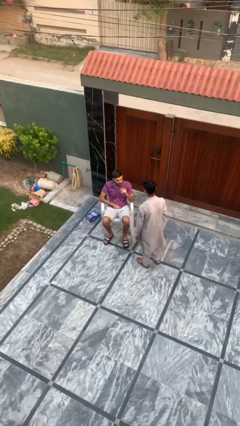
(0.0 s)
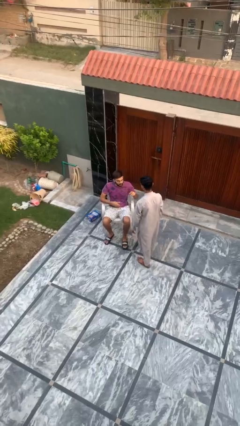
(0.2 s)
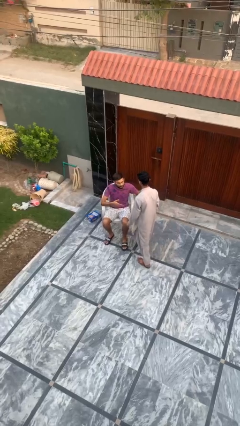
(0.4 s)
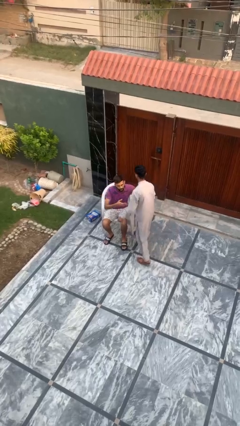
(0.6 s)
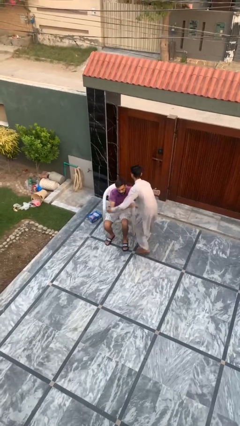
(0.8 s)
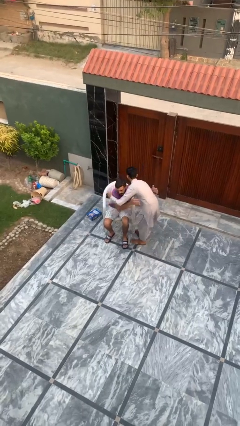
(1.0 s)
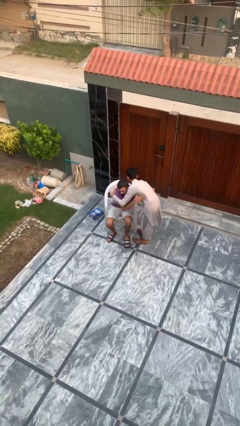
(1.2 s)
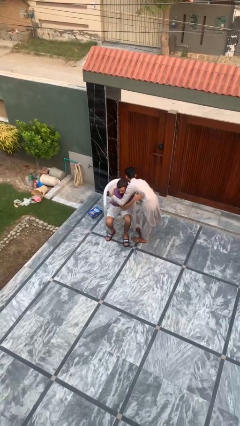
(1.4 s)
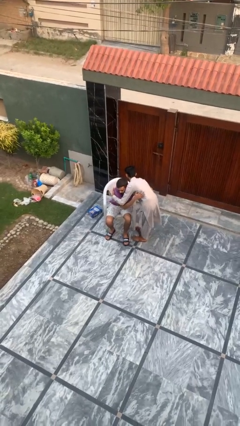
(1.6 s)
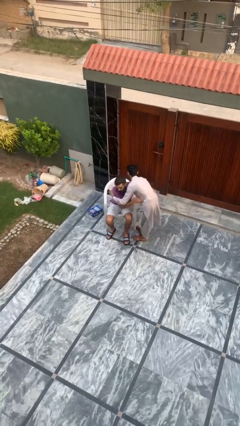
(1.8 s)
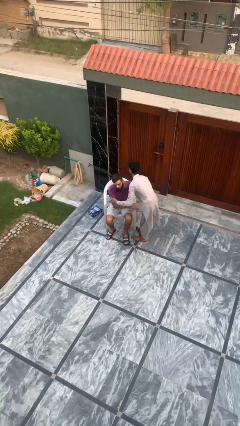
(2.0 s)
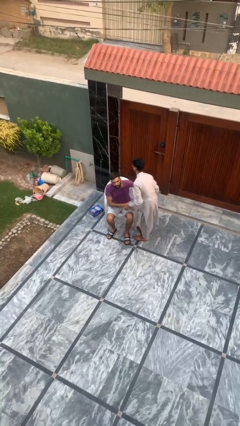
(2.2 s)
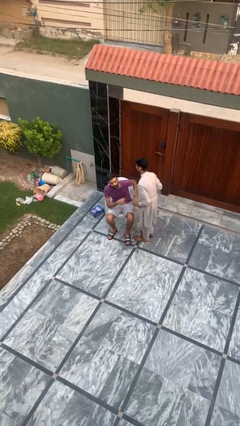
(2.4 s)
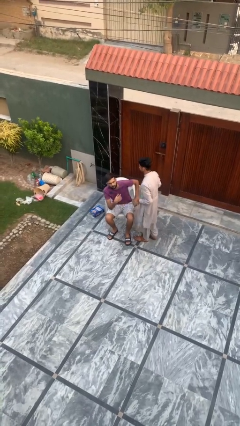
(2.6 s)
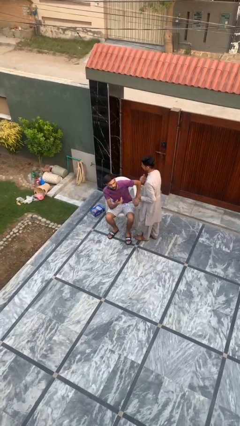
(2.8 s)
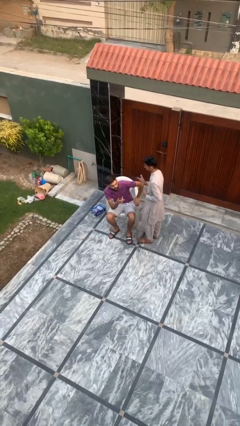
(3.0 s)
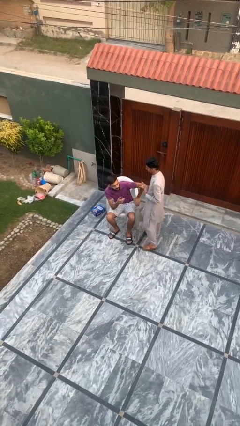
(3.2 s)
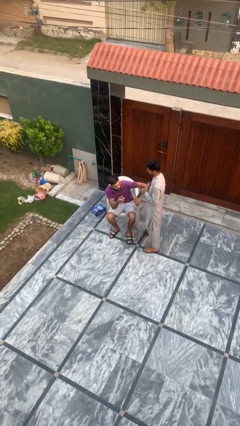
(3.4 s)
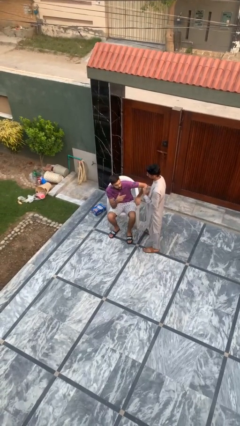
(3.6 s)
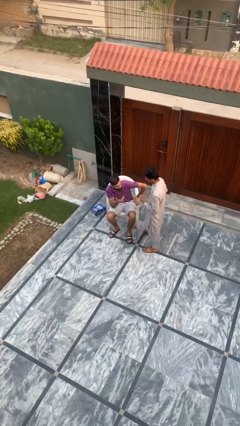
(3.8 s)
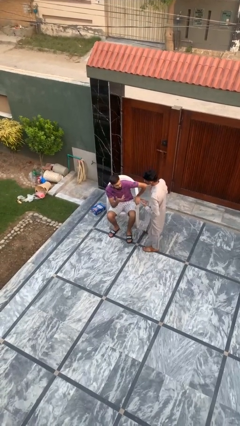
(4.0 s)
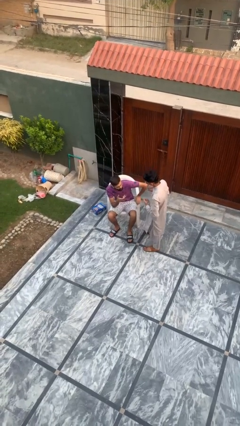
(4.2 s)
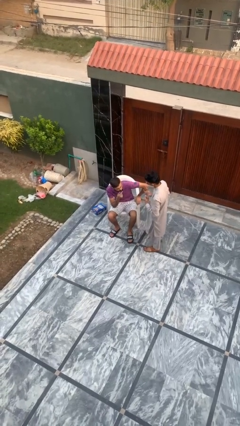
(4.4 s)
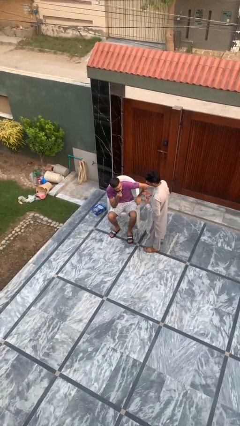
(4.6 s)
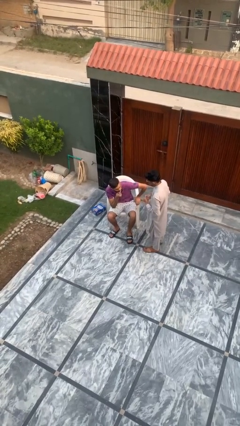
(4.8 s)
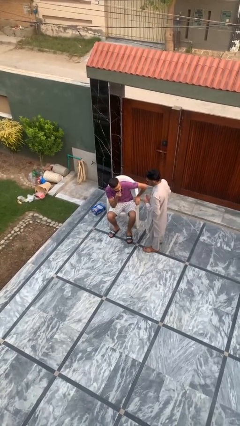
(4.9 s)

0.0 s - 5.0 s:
person embraces person

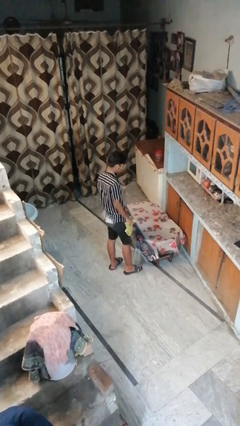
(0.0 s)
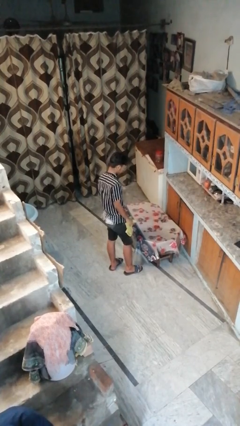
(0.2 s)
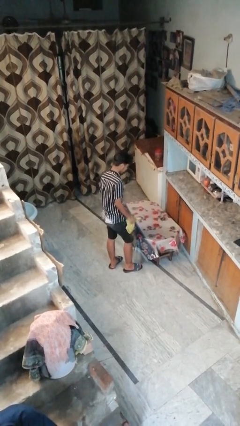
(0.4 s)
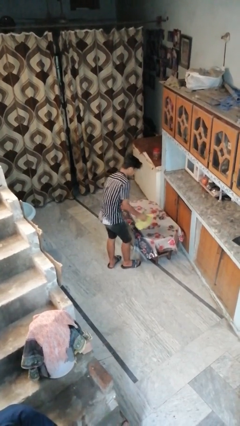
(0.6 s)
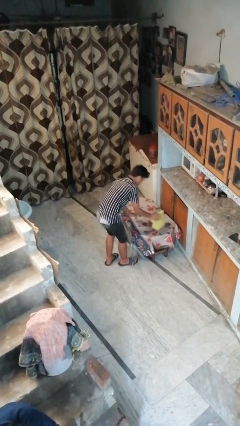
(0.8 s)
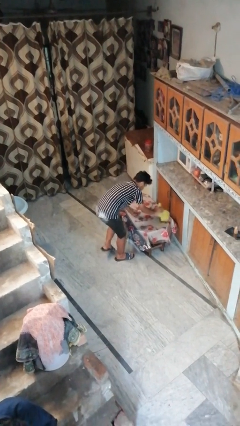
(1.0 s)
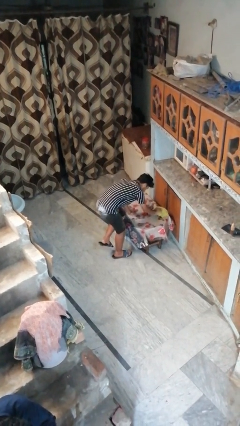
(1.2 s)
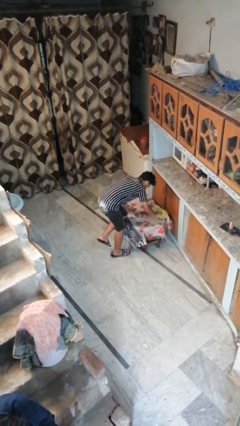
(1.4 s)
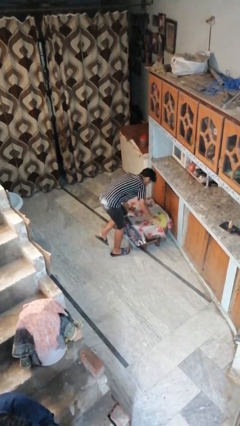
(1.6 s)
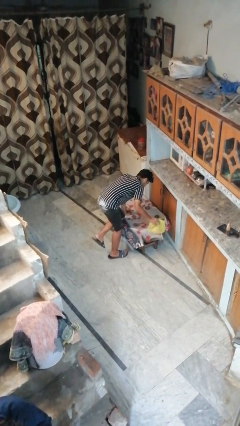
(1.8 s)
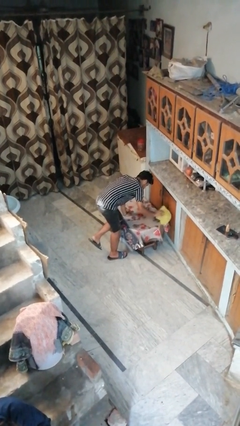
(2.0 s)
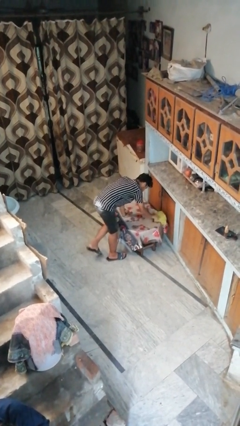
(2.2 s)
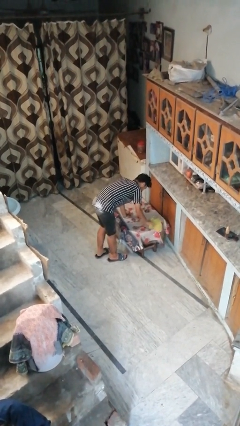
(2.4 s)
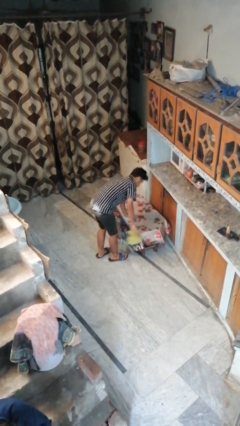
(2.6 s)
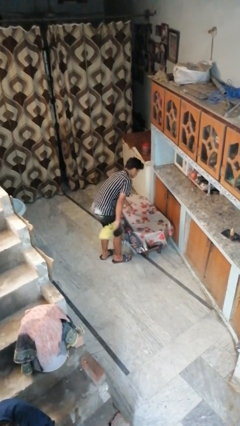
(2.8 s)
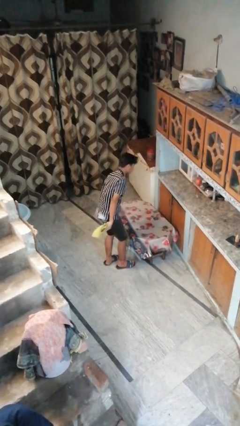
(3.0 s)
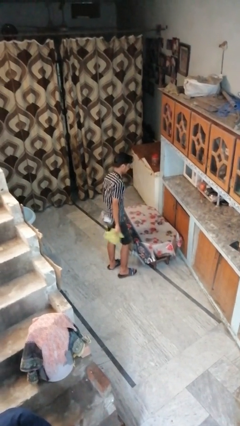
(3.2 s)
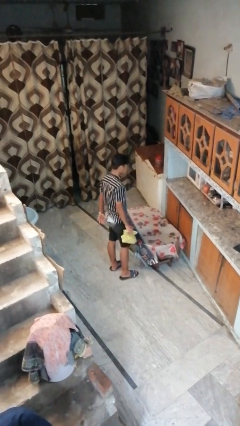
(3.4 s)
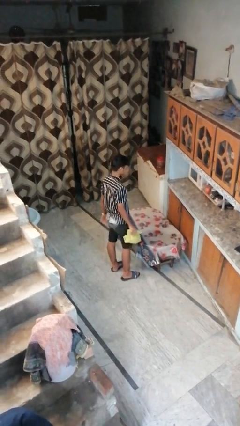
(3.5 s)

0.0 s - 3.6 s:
person cleans table with rag

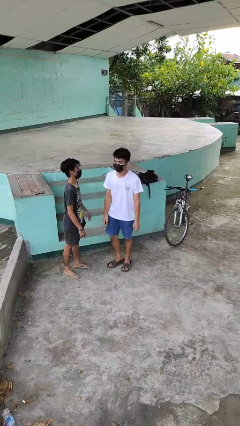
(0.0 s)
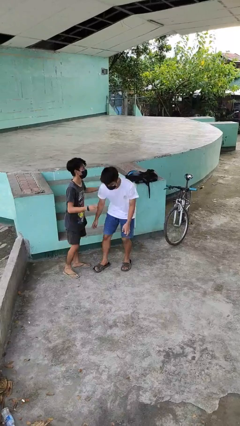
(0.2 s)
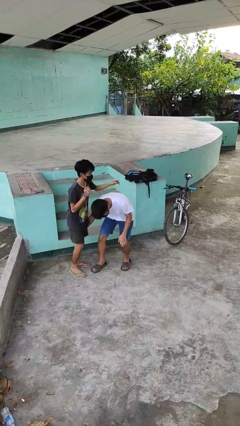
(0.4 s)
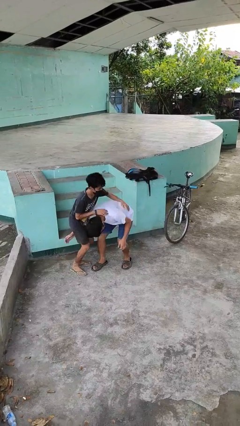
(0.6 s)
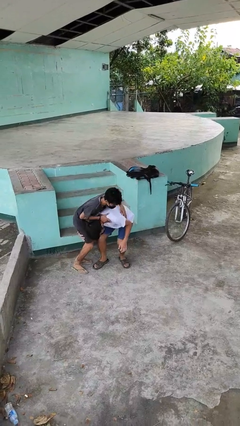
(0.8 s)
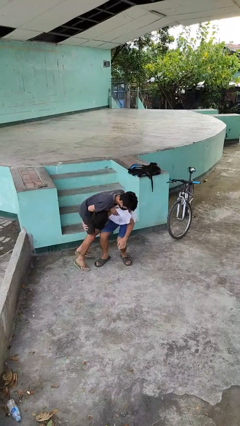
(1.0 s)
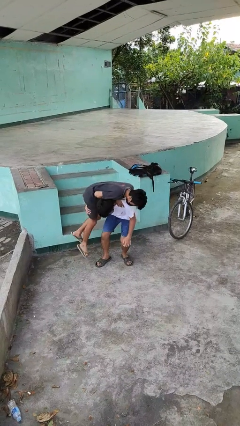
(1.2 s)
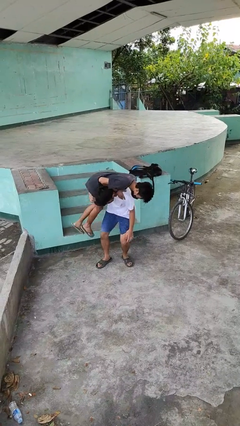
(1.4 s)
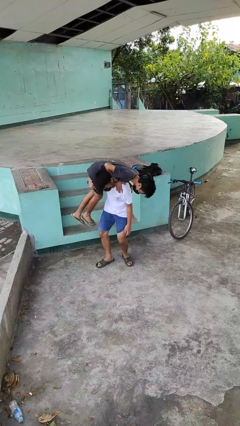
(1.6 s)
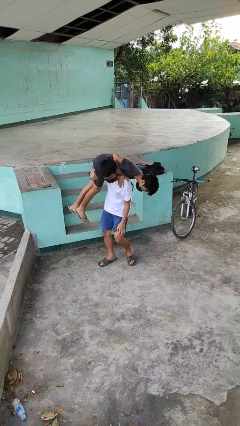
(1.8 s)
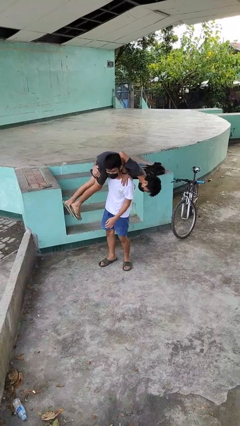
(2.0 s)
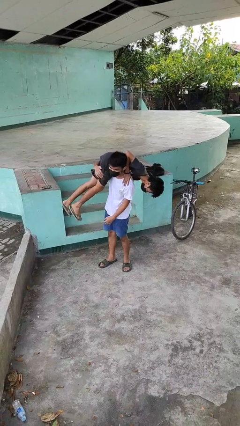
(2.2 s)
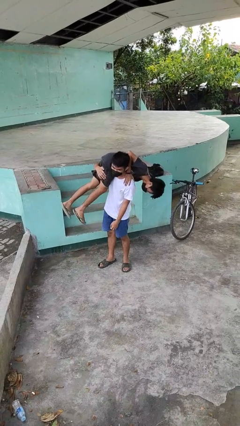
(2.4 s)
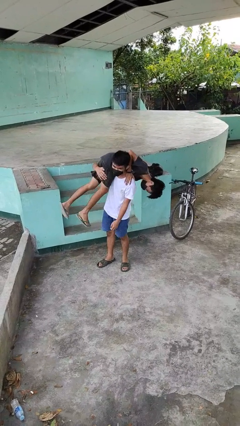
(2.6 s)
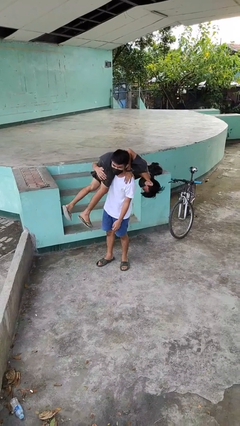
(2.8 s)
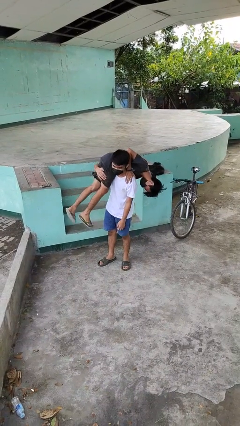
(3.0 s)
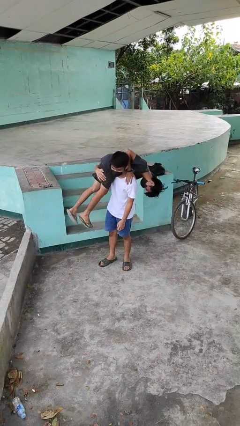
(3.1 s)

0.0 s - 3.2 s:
person carries person over shoulder

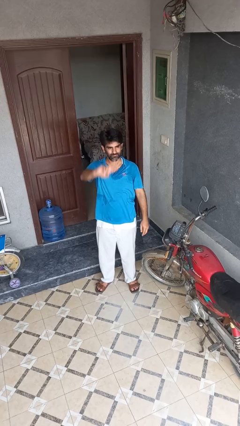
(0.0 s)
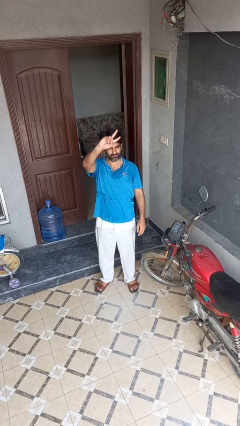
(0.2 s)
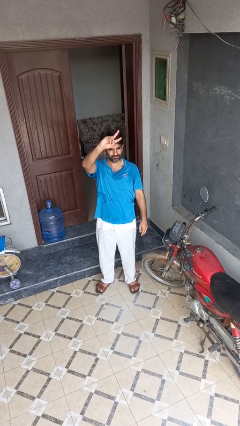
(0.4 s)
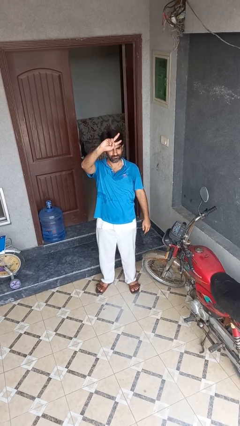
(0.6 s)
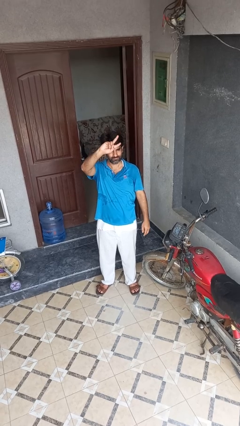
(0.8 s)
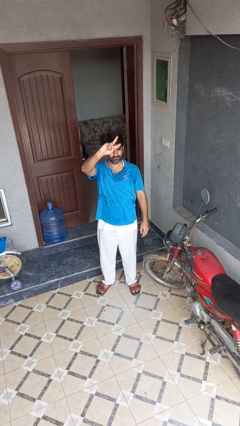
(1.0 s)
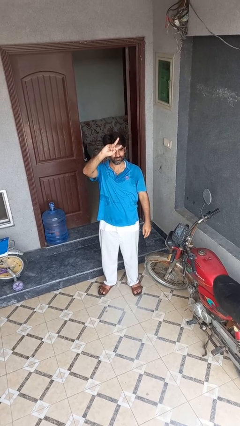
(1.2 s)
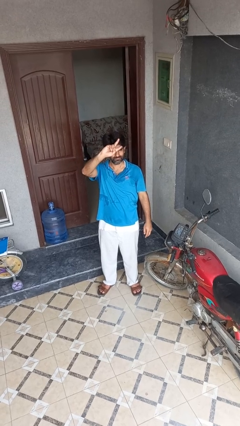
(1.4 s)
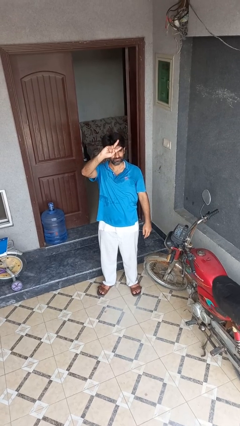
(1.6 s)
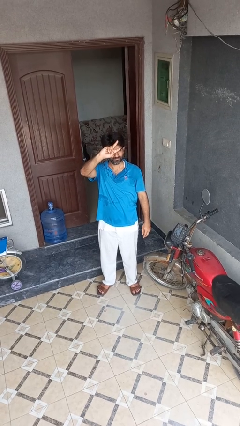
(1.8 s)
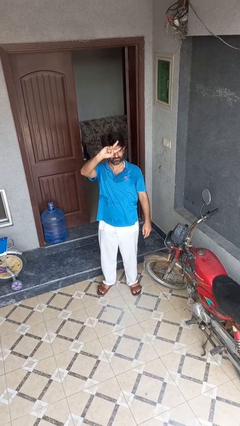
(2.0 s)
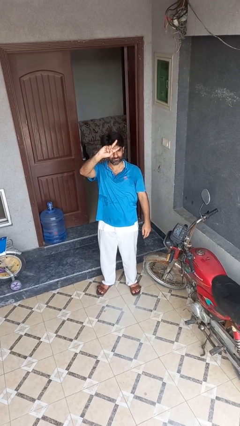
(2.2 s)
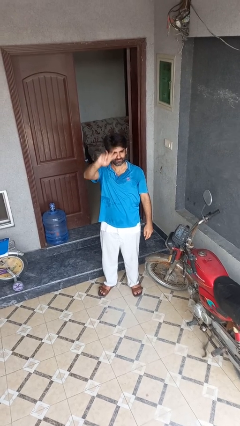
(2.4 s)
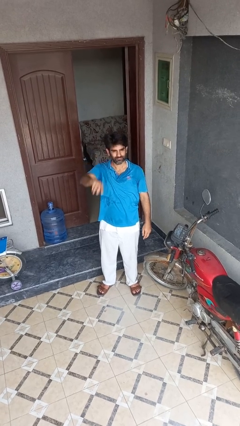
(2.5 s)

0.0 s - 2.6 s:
person gestures peace

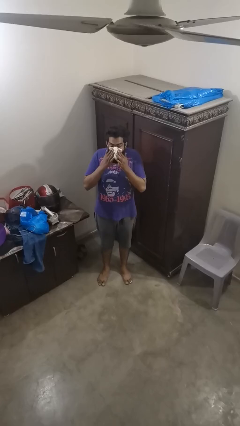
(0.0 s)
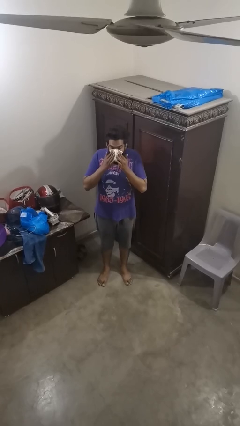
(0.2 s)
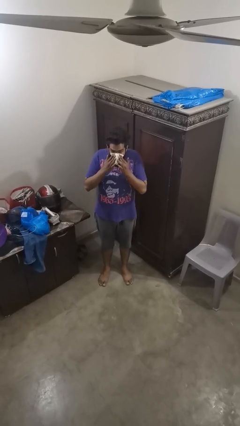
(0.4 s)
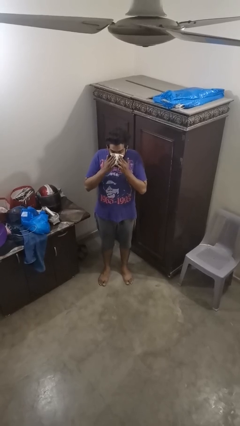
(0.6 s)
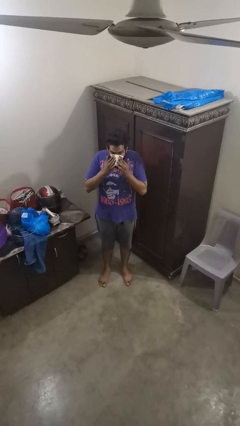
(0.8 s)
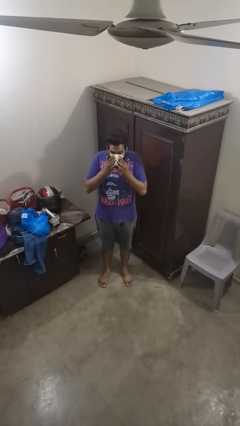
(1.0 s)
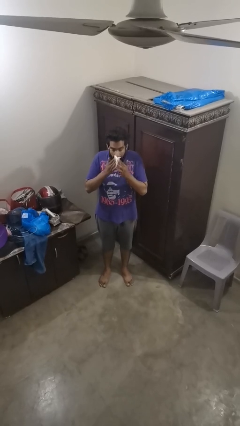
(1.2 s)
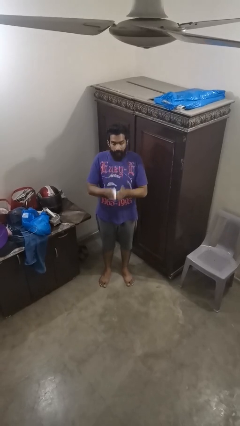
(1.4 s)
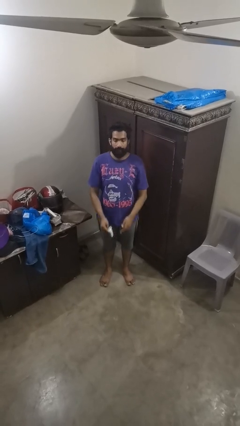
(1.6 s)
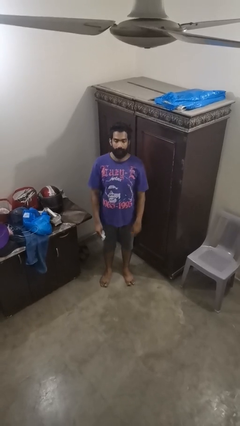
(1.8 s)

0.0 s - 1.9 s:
person blows nose

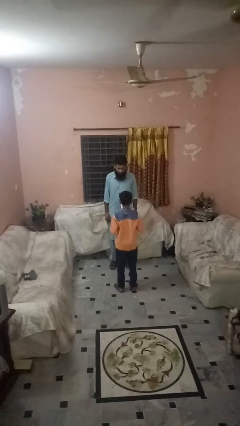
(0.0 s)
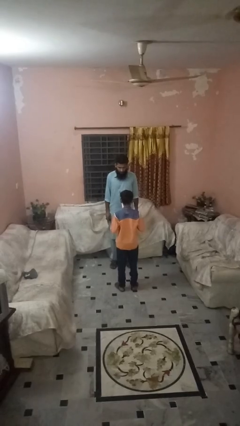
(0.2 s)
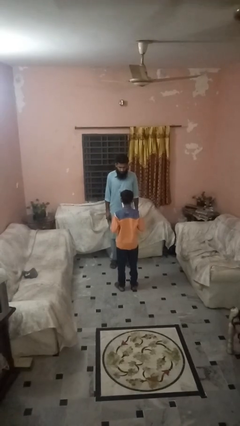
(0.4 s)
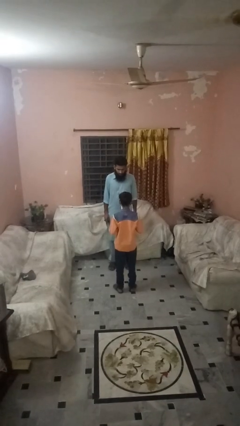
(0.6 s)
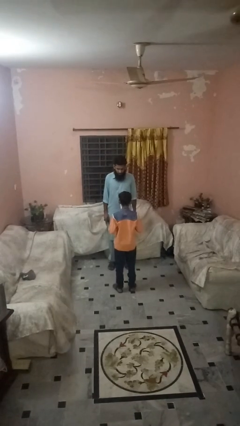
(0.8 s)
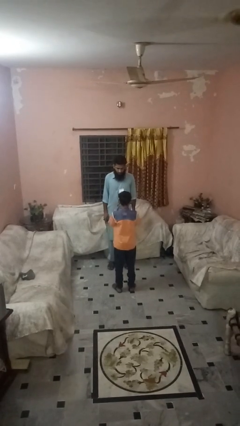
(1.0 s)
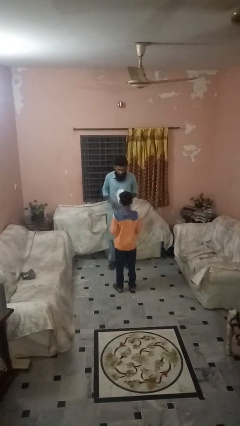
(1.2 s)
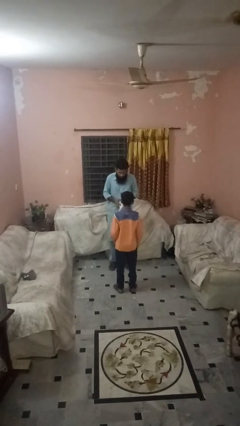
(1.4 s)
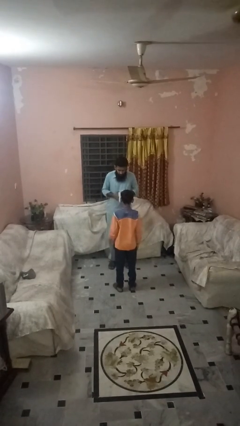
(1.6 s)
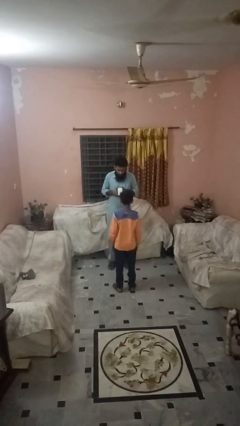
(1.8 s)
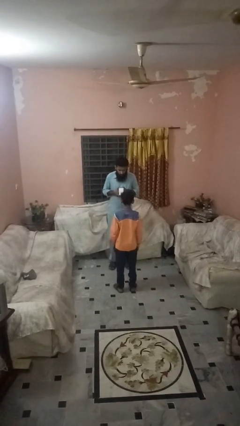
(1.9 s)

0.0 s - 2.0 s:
person catches object from person
